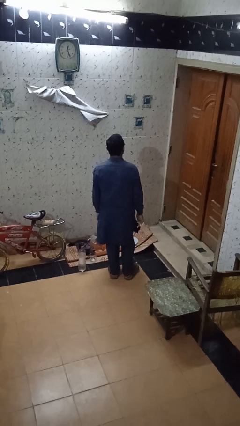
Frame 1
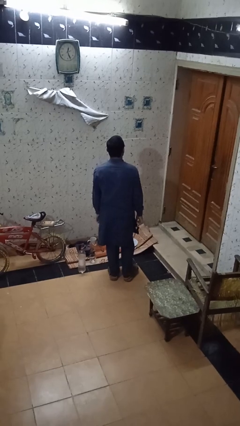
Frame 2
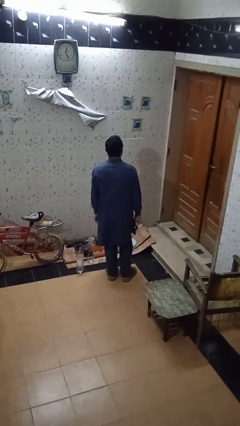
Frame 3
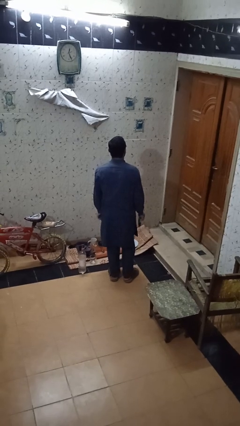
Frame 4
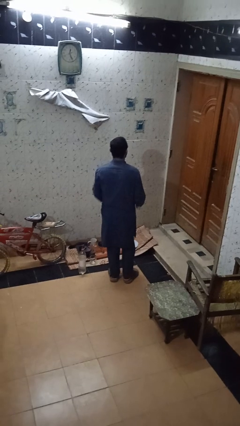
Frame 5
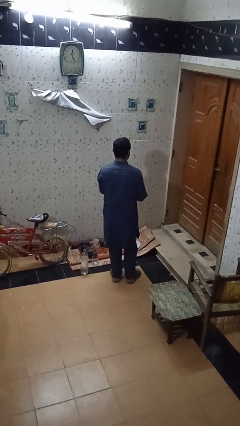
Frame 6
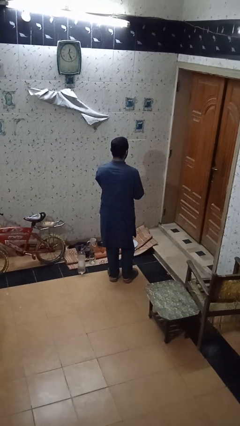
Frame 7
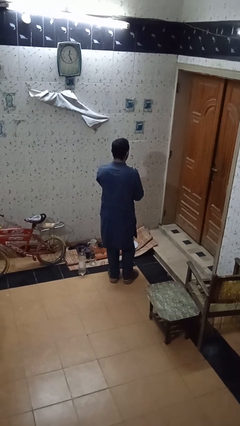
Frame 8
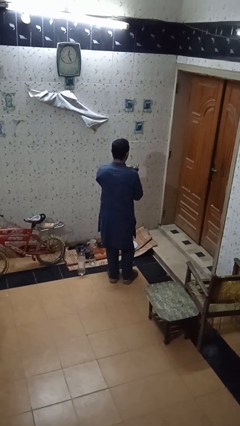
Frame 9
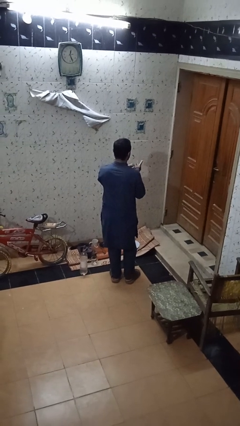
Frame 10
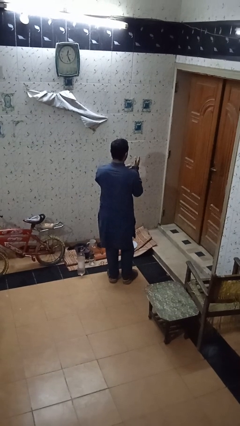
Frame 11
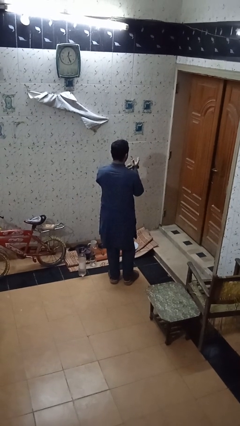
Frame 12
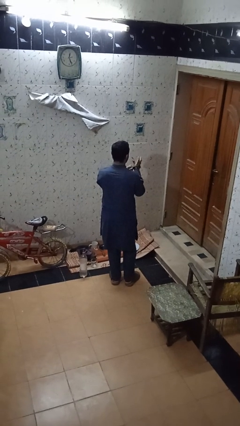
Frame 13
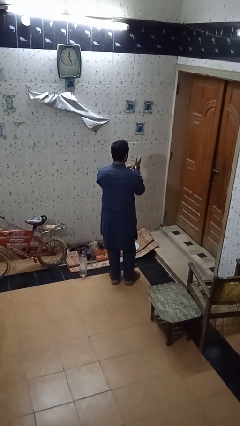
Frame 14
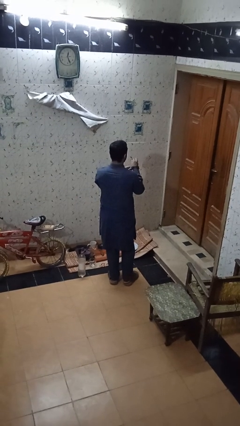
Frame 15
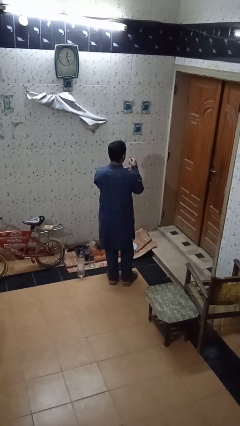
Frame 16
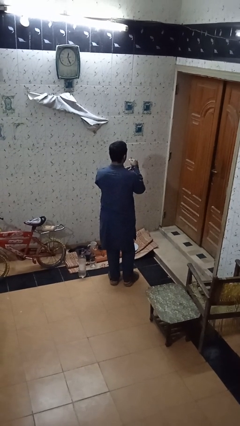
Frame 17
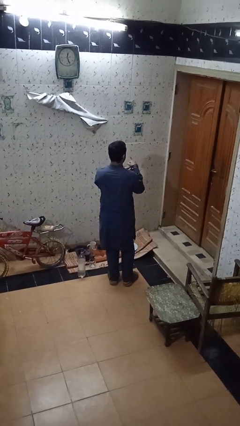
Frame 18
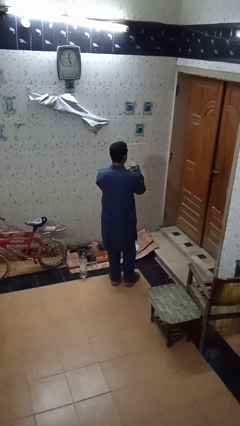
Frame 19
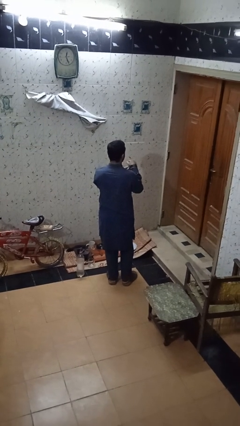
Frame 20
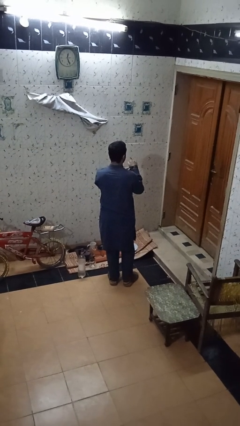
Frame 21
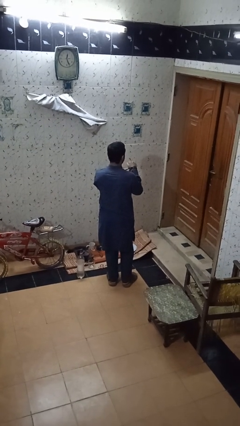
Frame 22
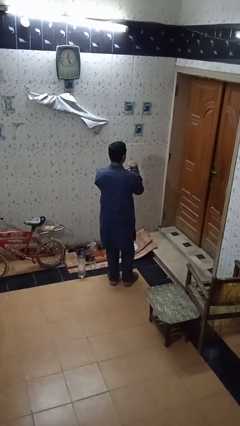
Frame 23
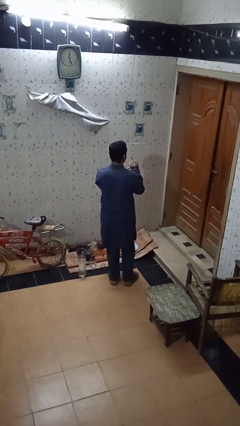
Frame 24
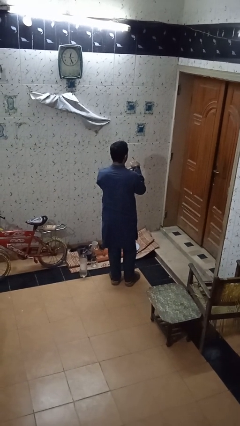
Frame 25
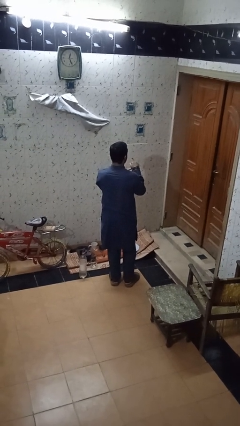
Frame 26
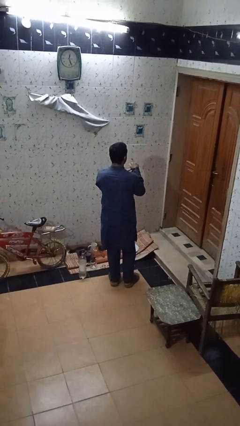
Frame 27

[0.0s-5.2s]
person puts on wristwatch

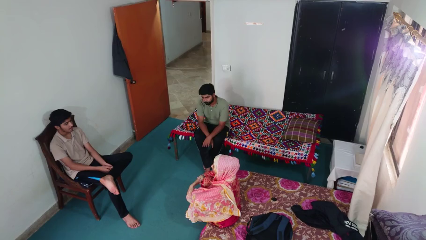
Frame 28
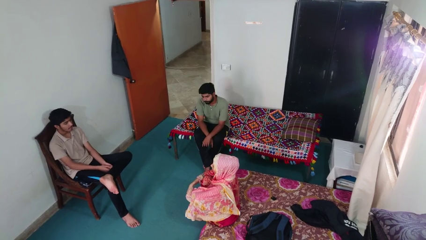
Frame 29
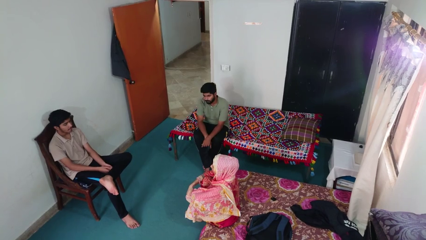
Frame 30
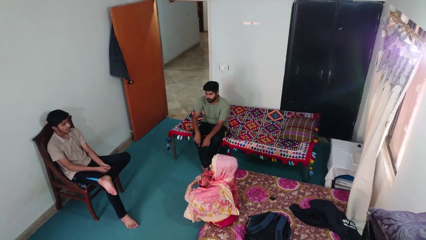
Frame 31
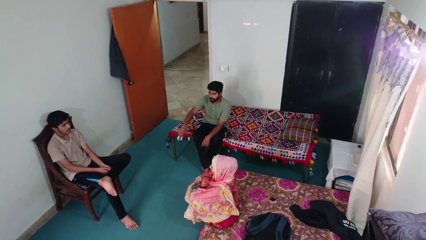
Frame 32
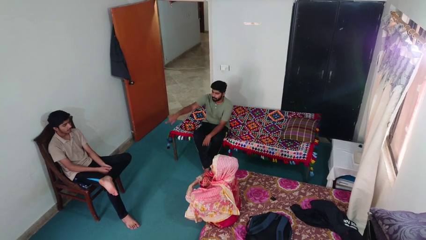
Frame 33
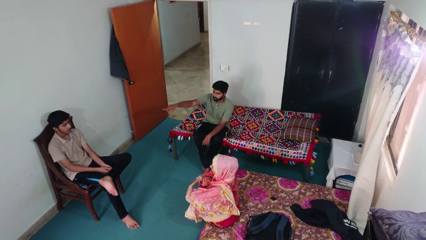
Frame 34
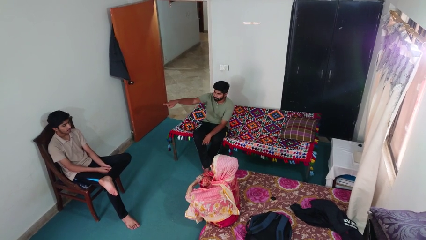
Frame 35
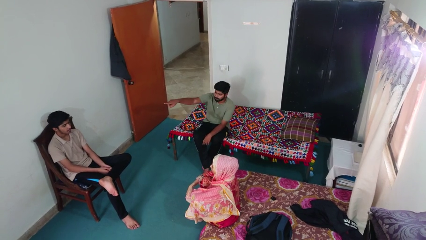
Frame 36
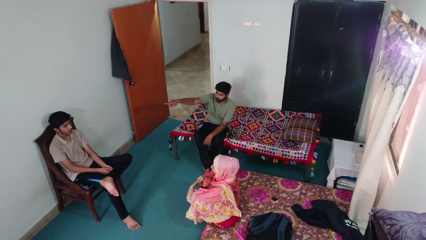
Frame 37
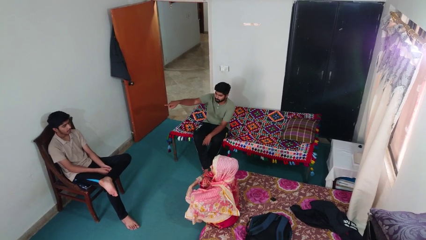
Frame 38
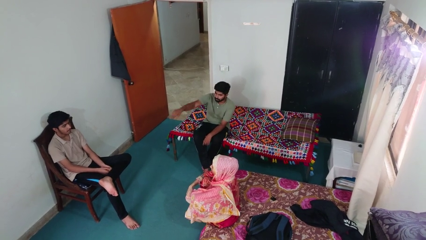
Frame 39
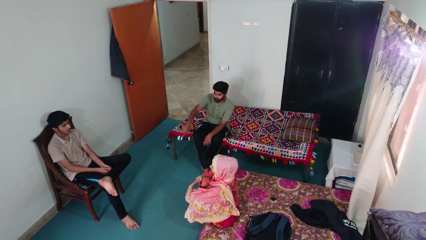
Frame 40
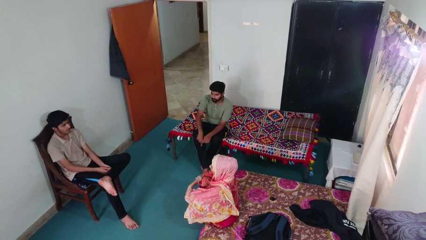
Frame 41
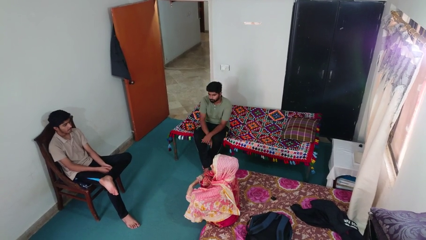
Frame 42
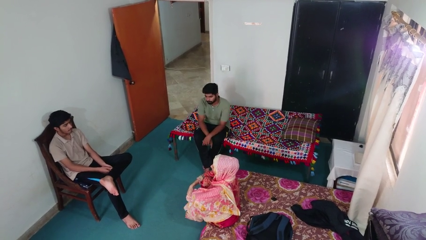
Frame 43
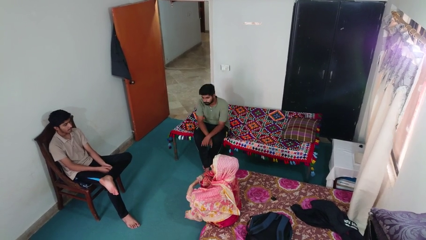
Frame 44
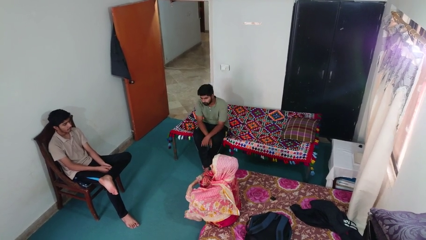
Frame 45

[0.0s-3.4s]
person points at person

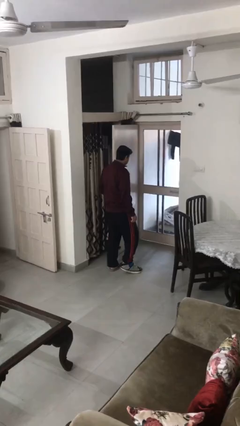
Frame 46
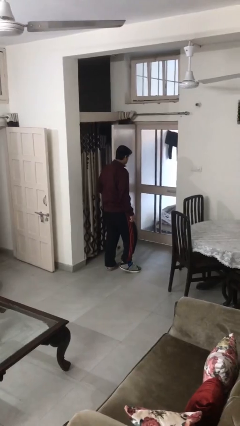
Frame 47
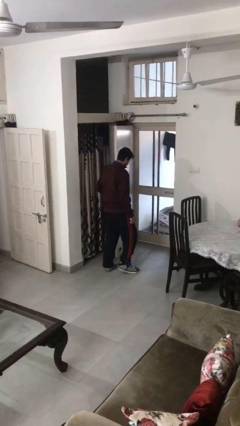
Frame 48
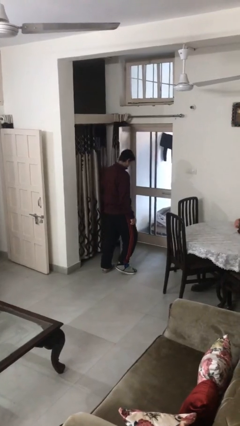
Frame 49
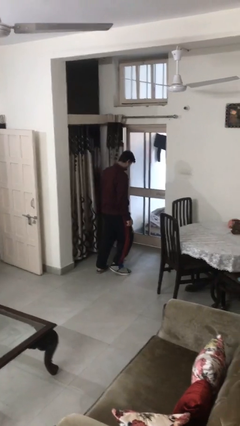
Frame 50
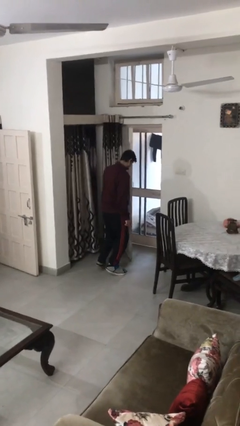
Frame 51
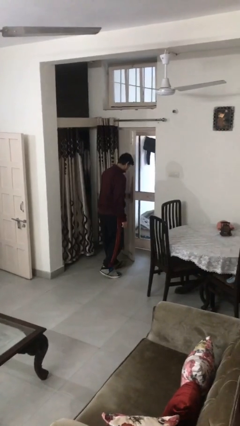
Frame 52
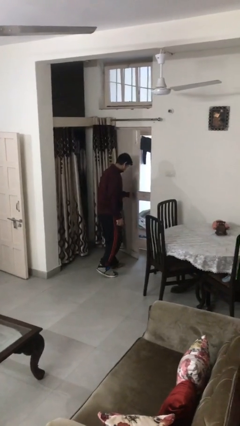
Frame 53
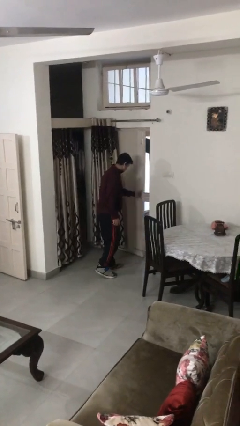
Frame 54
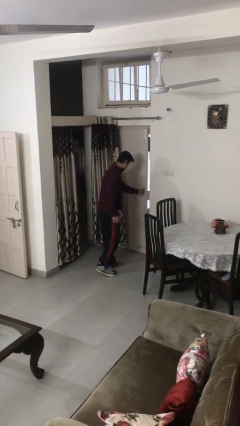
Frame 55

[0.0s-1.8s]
person closes facility door

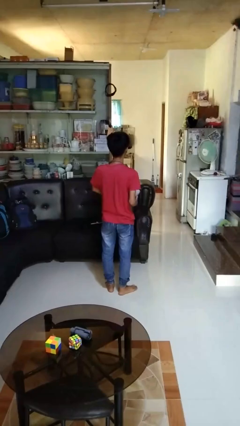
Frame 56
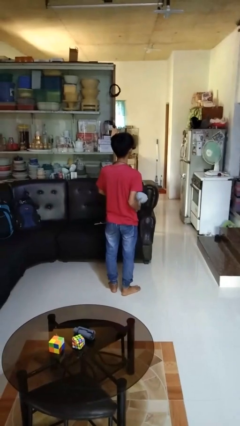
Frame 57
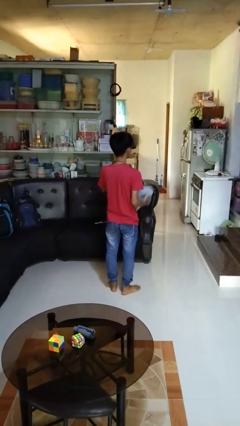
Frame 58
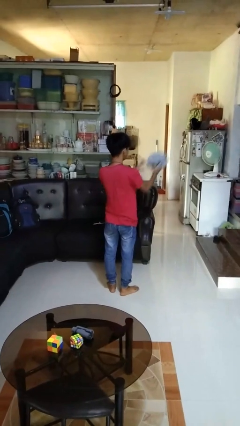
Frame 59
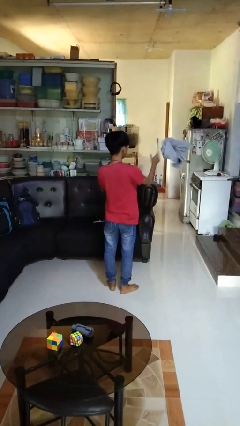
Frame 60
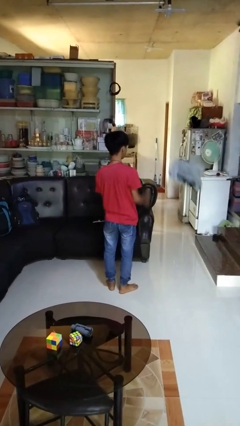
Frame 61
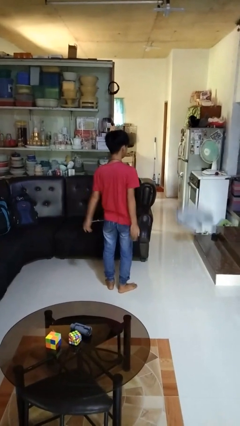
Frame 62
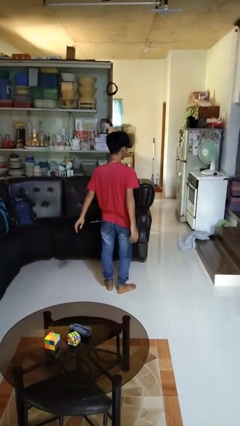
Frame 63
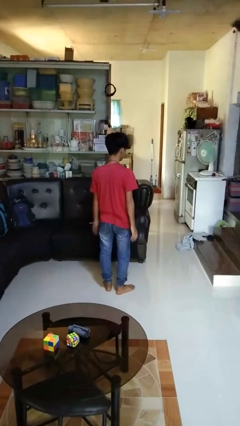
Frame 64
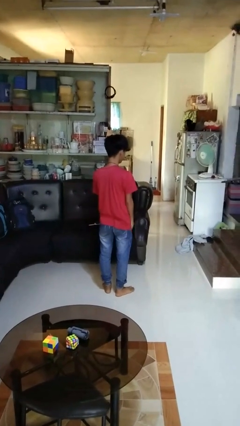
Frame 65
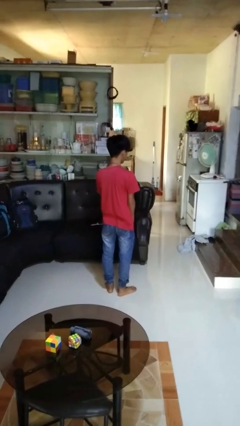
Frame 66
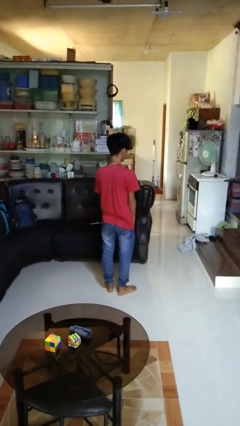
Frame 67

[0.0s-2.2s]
person throws object into air

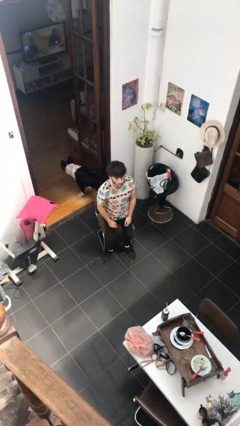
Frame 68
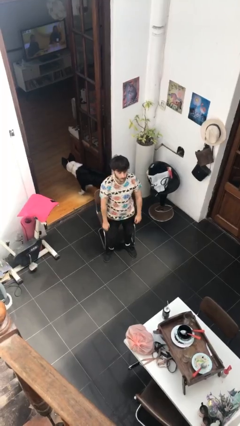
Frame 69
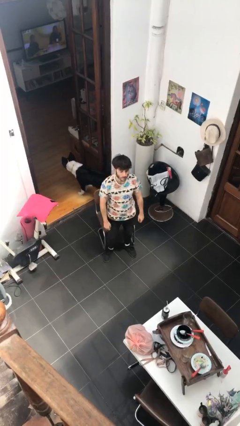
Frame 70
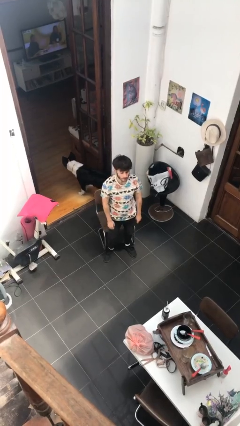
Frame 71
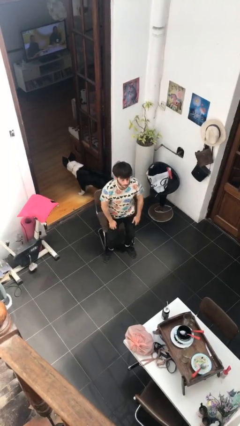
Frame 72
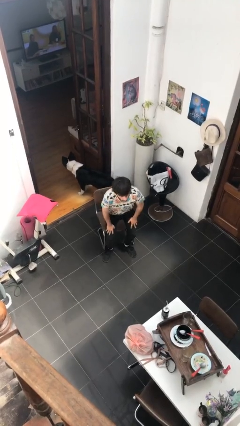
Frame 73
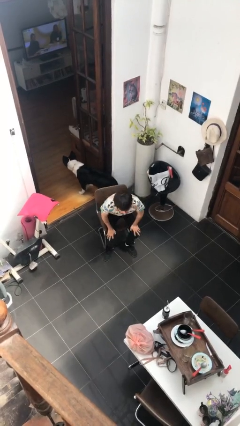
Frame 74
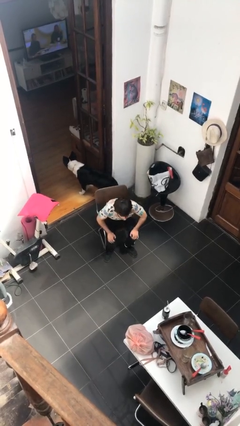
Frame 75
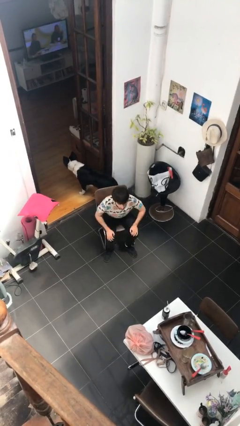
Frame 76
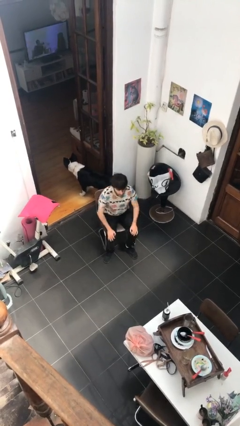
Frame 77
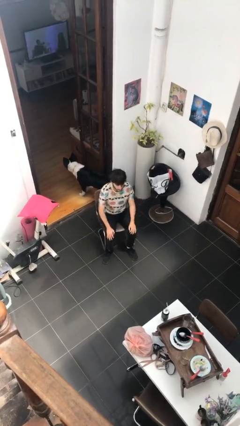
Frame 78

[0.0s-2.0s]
person sits down

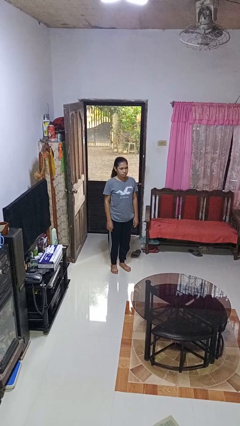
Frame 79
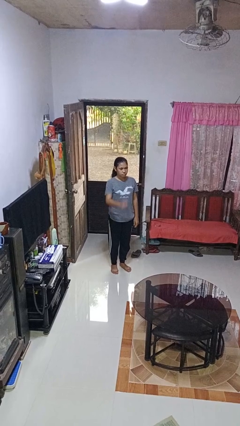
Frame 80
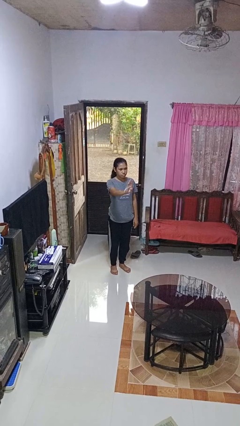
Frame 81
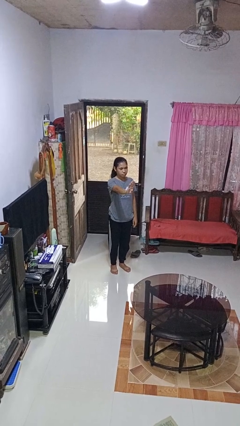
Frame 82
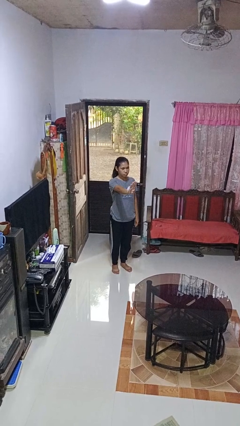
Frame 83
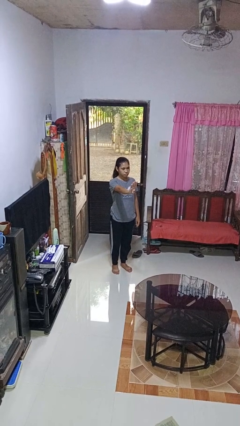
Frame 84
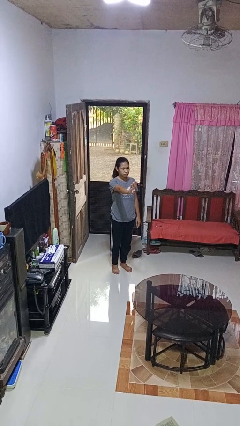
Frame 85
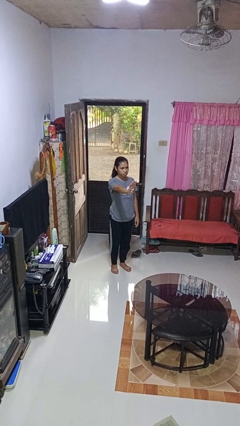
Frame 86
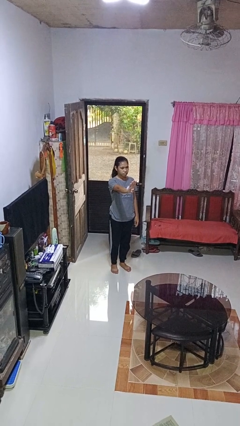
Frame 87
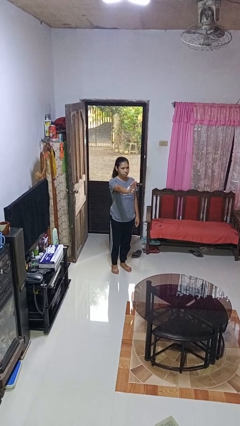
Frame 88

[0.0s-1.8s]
person gestures number four

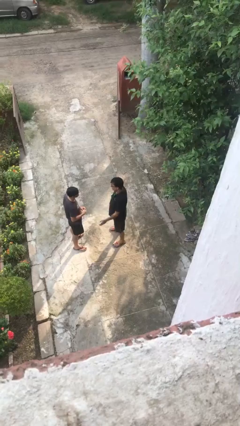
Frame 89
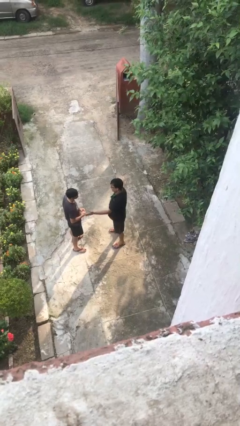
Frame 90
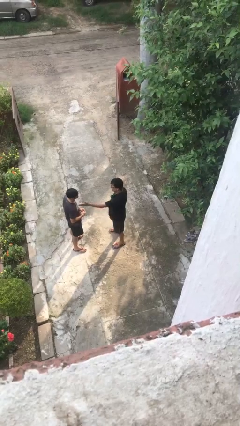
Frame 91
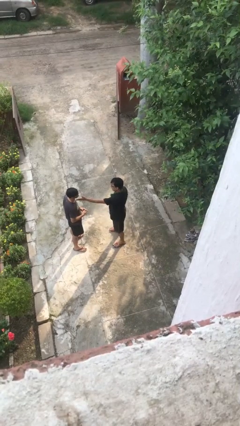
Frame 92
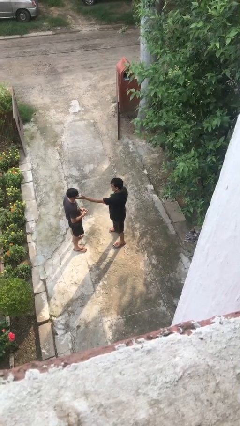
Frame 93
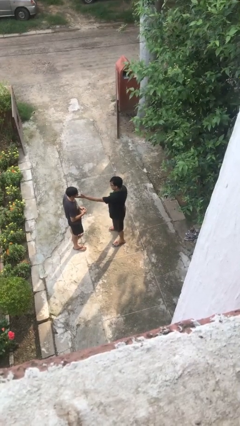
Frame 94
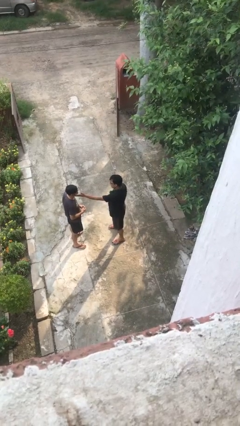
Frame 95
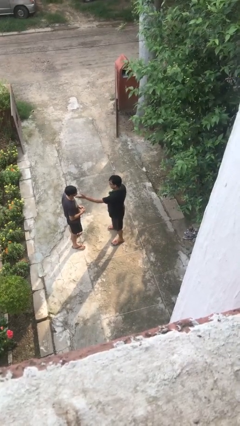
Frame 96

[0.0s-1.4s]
person touches face of person
